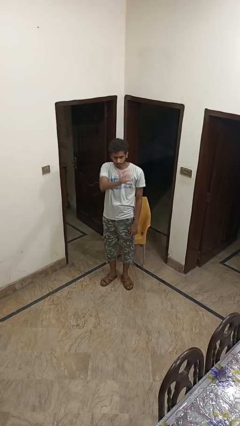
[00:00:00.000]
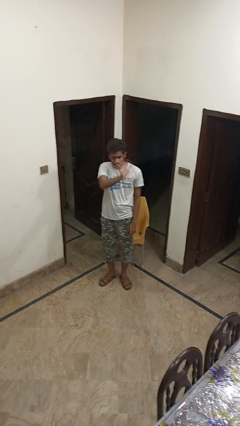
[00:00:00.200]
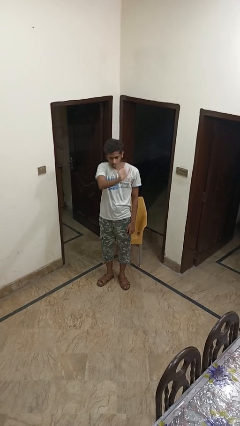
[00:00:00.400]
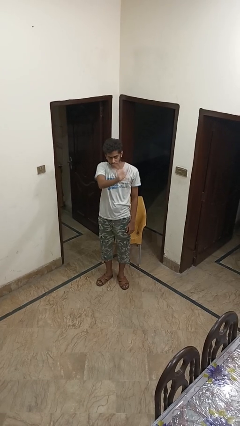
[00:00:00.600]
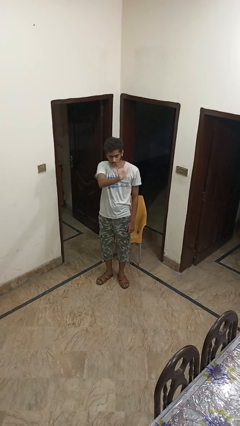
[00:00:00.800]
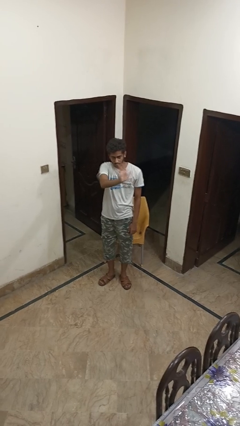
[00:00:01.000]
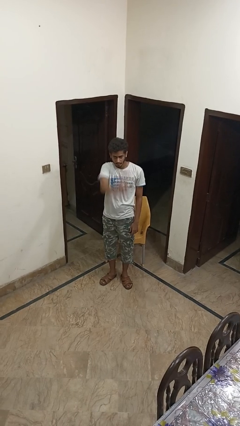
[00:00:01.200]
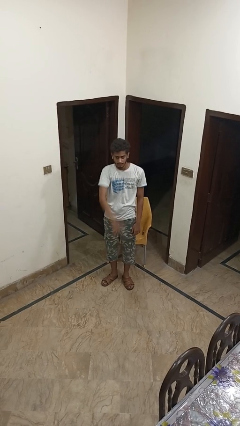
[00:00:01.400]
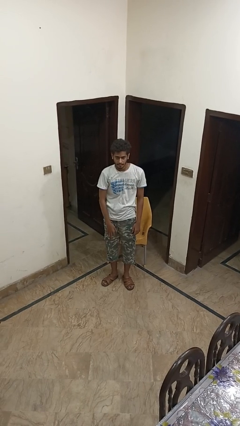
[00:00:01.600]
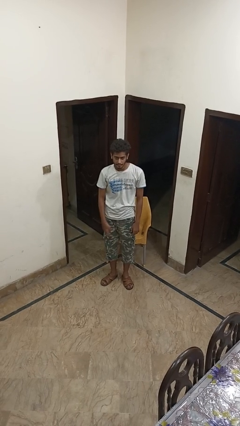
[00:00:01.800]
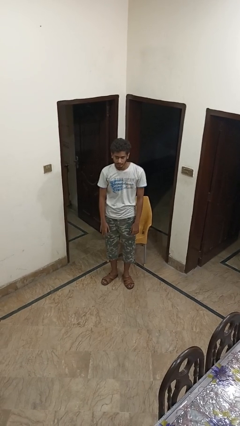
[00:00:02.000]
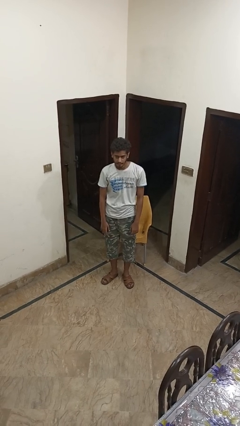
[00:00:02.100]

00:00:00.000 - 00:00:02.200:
person waves at person

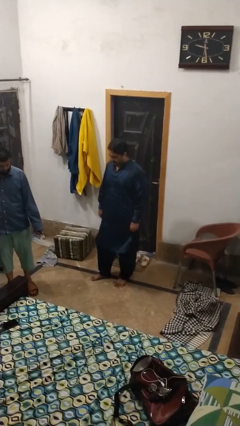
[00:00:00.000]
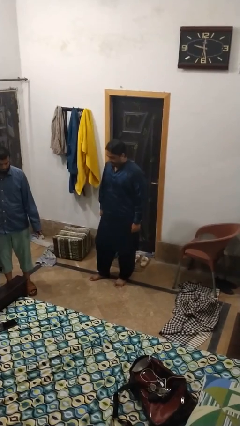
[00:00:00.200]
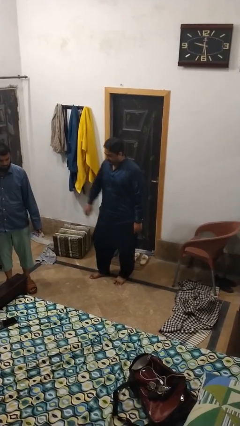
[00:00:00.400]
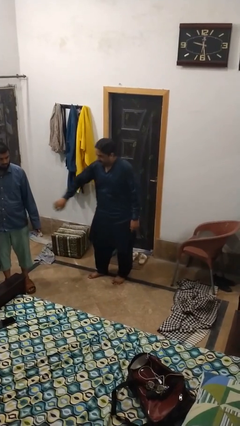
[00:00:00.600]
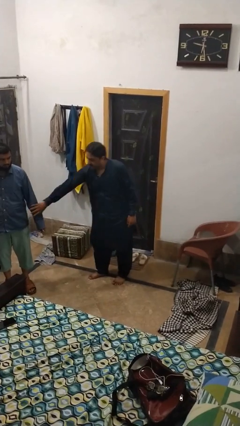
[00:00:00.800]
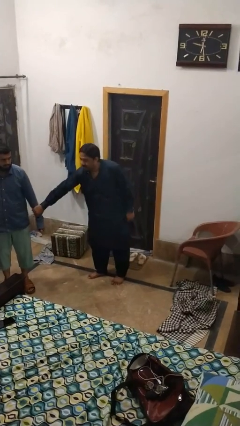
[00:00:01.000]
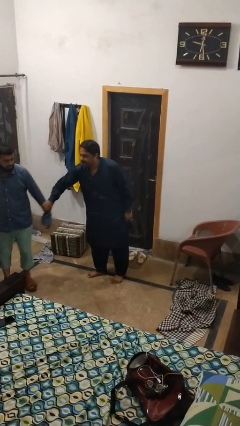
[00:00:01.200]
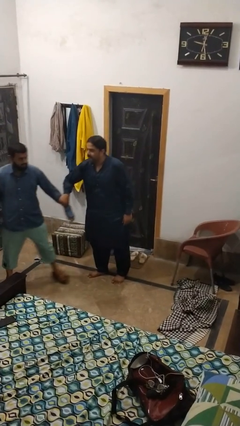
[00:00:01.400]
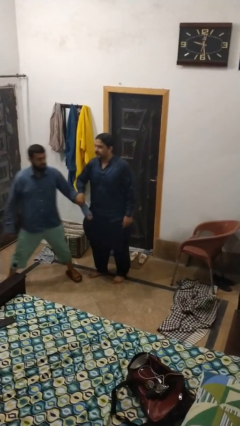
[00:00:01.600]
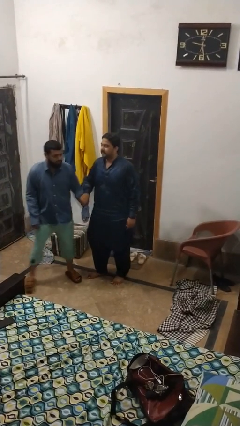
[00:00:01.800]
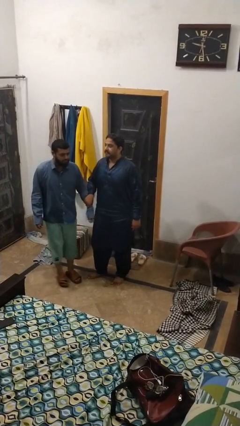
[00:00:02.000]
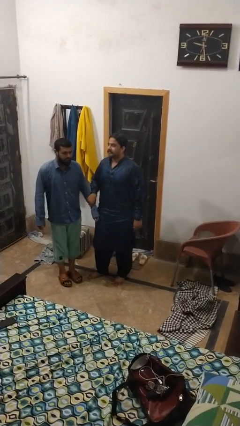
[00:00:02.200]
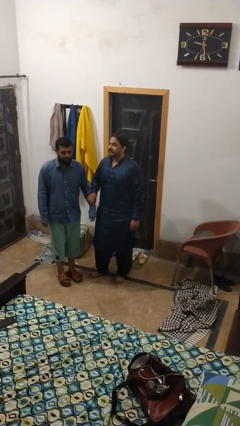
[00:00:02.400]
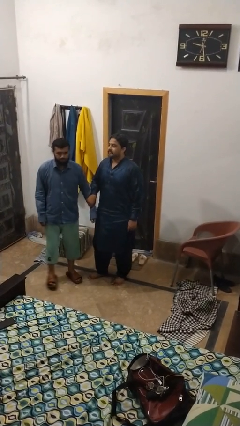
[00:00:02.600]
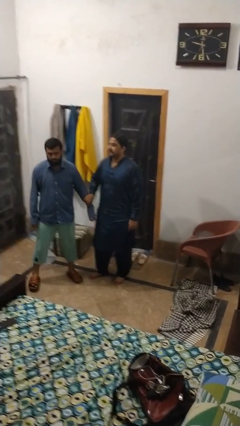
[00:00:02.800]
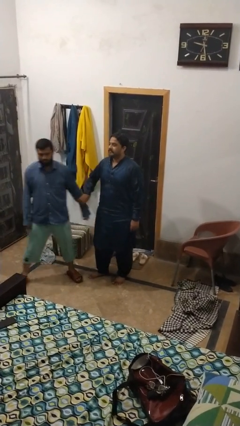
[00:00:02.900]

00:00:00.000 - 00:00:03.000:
person grabs person by forearm

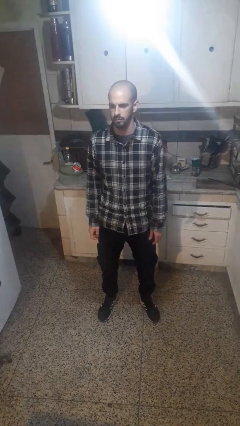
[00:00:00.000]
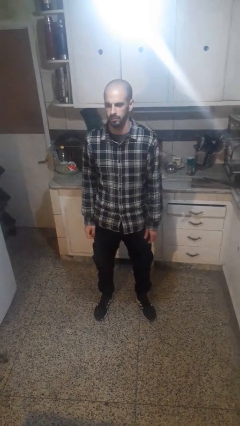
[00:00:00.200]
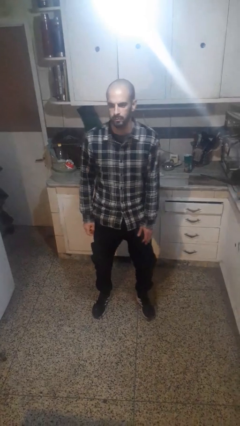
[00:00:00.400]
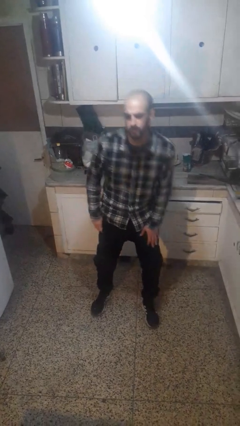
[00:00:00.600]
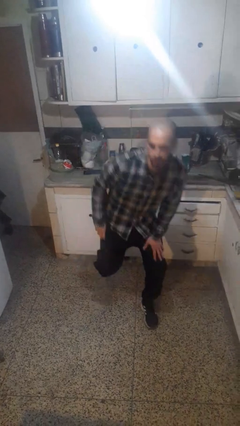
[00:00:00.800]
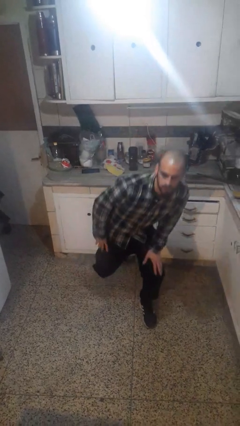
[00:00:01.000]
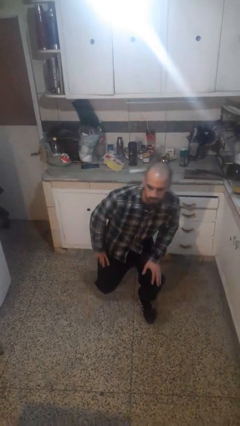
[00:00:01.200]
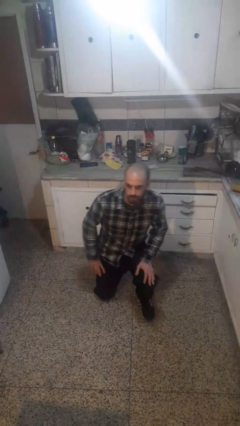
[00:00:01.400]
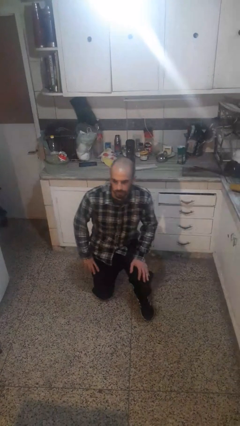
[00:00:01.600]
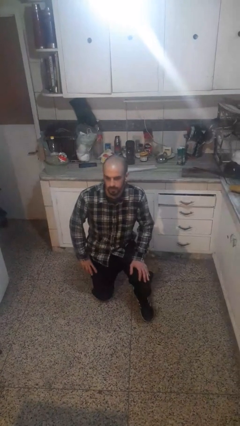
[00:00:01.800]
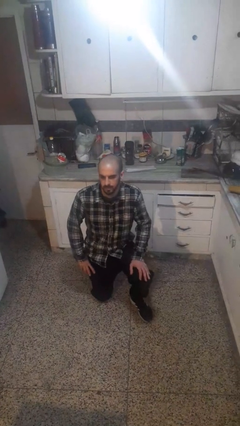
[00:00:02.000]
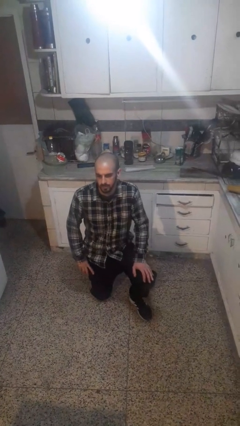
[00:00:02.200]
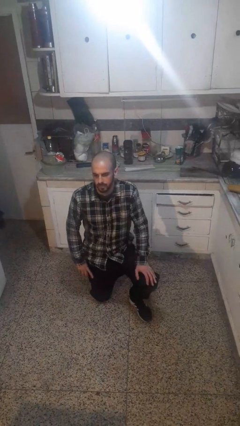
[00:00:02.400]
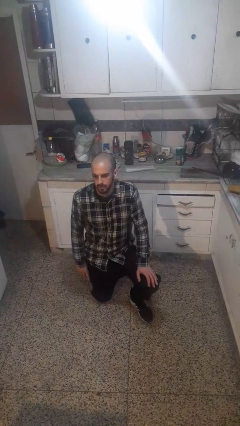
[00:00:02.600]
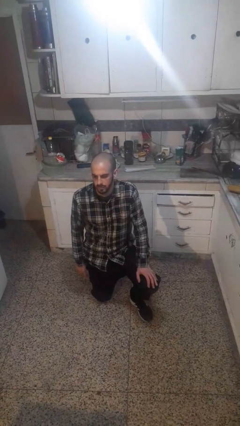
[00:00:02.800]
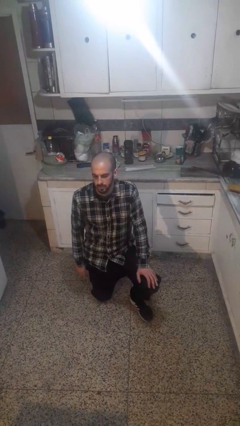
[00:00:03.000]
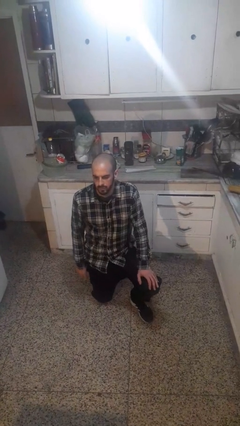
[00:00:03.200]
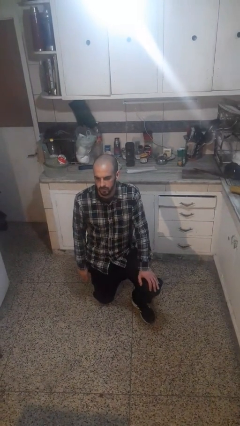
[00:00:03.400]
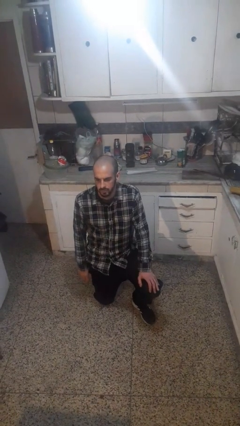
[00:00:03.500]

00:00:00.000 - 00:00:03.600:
person kneels

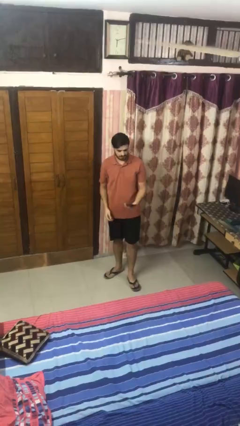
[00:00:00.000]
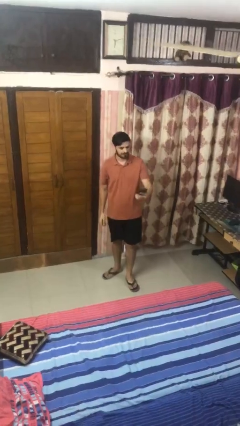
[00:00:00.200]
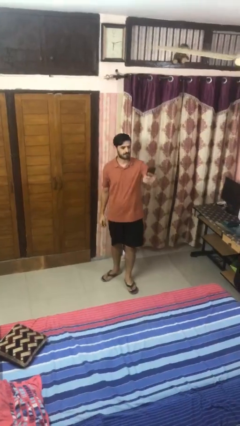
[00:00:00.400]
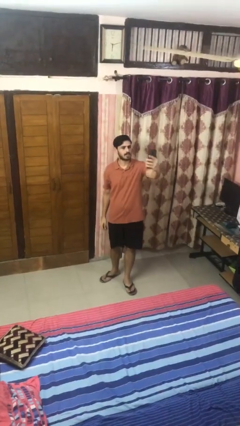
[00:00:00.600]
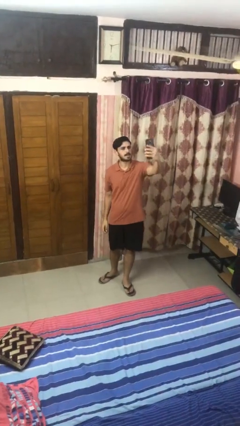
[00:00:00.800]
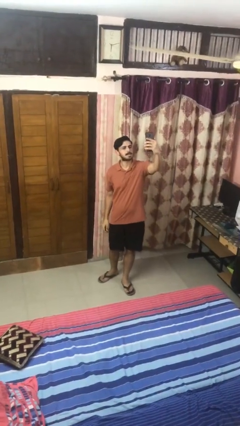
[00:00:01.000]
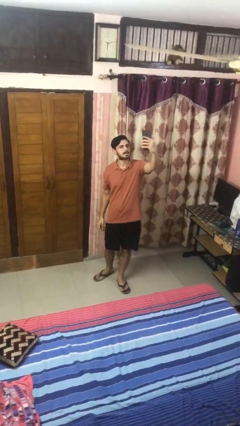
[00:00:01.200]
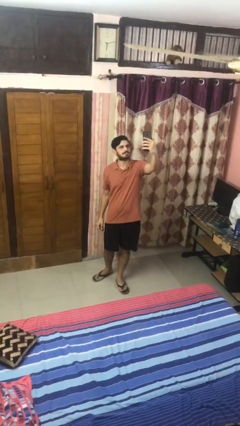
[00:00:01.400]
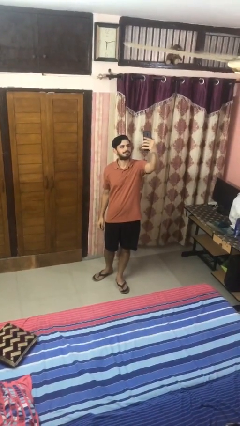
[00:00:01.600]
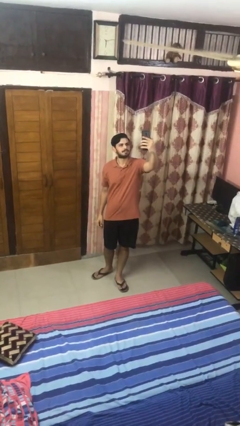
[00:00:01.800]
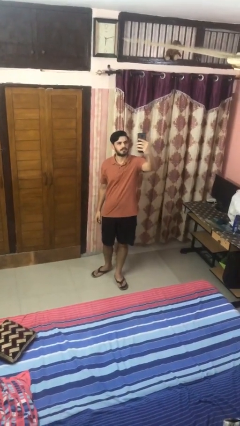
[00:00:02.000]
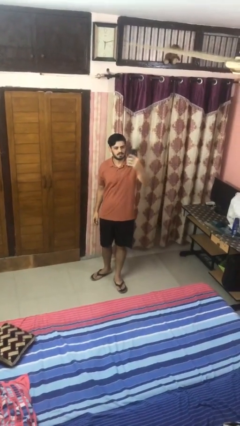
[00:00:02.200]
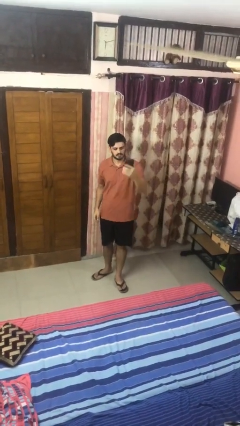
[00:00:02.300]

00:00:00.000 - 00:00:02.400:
person takes selfie

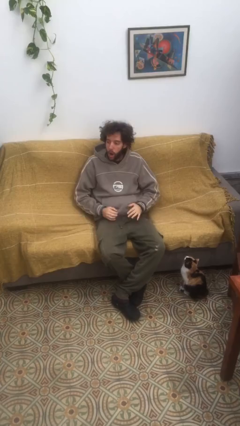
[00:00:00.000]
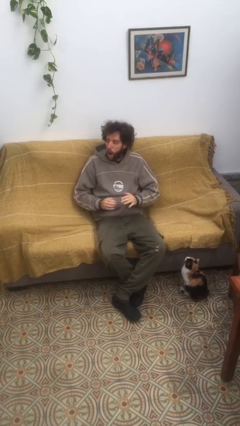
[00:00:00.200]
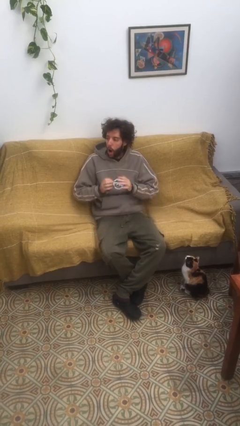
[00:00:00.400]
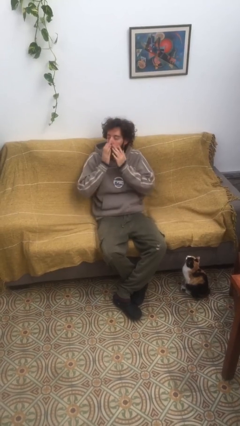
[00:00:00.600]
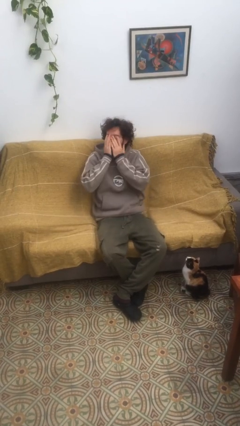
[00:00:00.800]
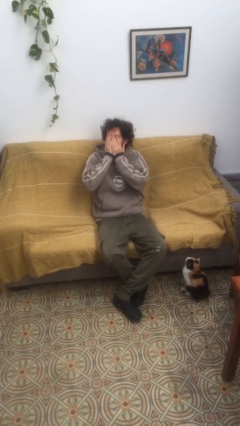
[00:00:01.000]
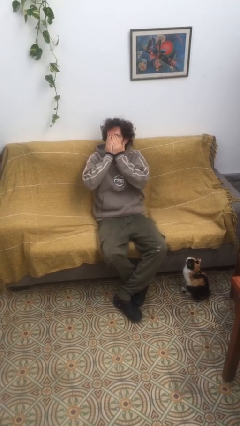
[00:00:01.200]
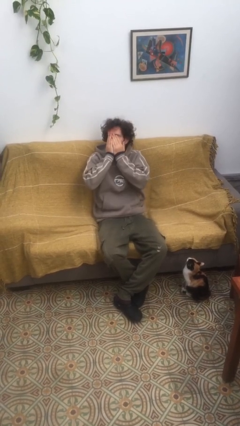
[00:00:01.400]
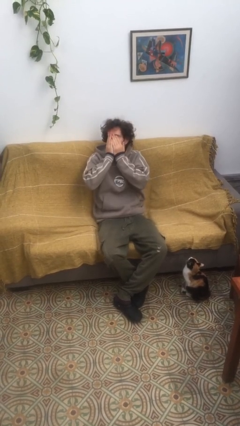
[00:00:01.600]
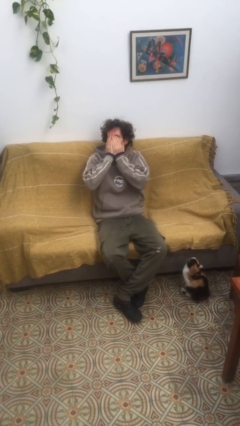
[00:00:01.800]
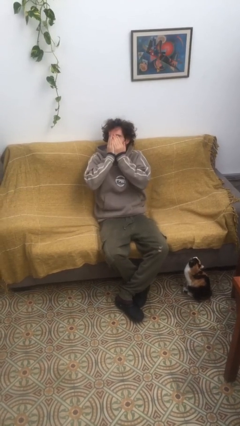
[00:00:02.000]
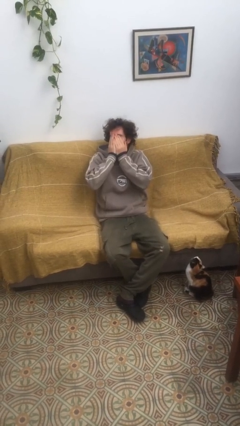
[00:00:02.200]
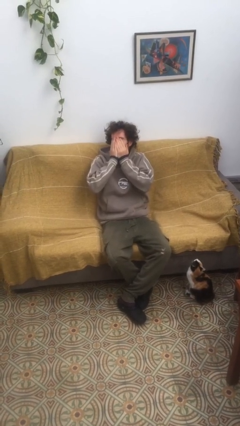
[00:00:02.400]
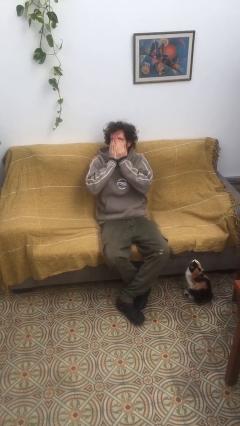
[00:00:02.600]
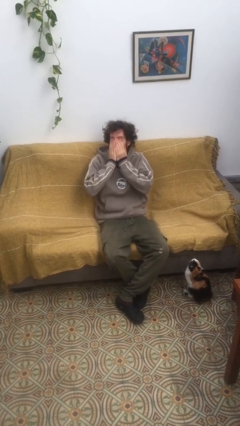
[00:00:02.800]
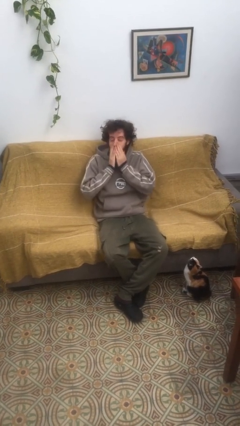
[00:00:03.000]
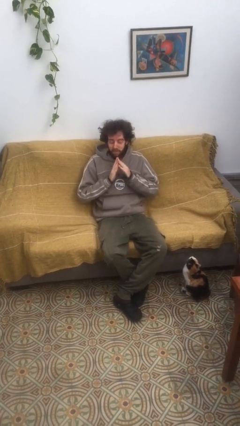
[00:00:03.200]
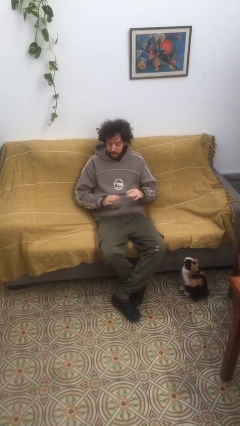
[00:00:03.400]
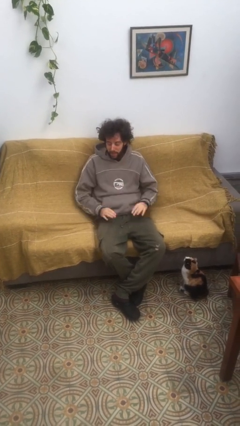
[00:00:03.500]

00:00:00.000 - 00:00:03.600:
person yawns

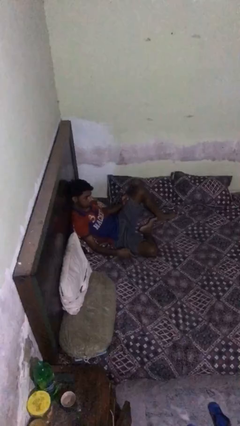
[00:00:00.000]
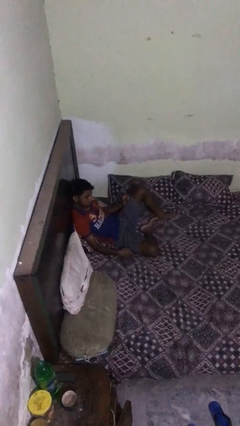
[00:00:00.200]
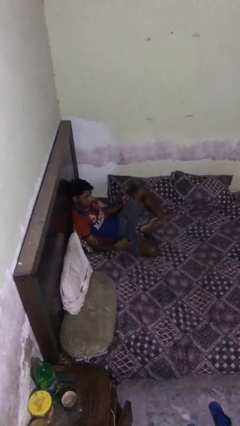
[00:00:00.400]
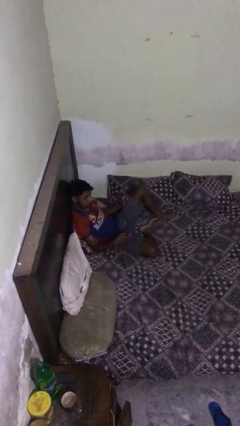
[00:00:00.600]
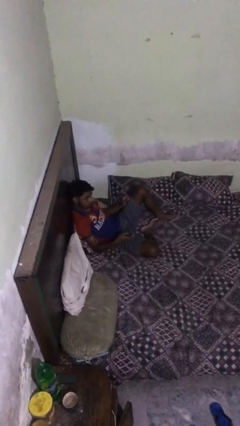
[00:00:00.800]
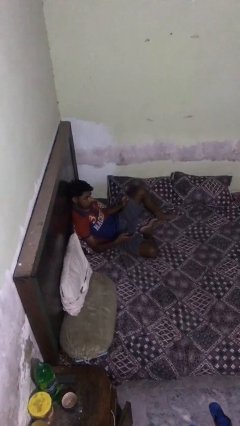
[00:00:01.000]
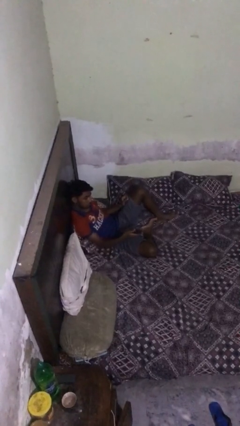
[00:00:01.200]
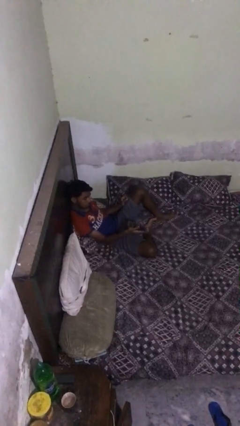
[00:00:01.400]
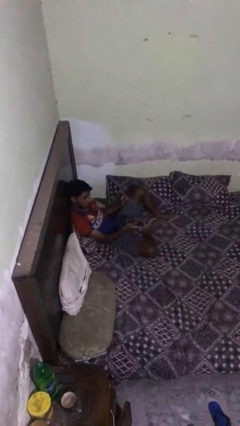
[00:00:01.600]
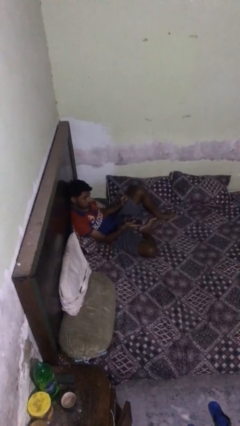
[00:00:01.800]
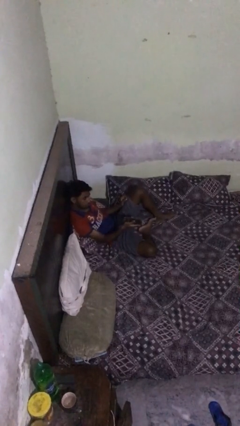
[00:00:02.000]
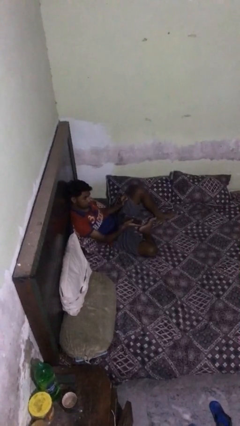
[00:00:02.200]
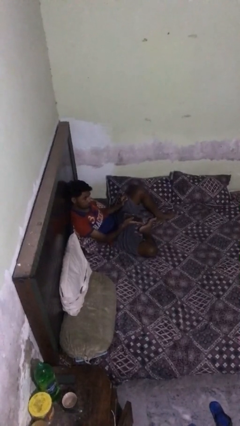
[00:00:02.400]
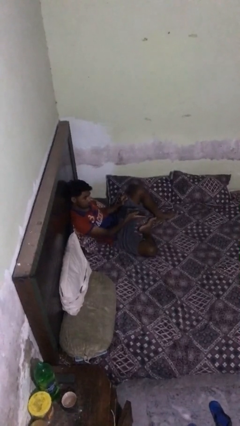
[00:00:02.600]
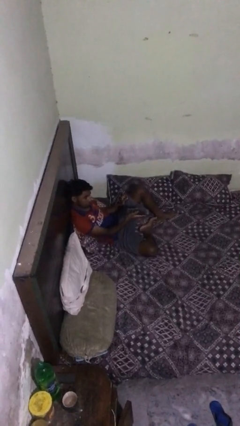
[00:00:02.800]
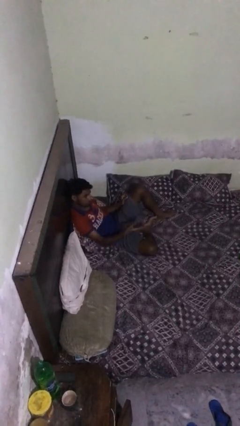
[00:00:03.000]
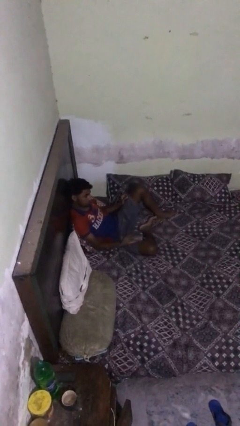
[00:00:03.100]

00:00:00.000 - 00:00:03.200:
person uses television remote
